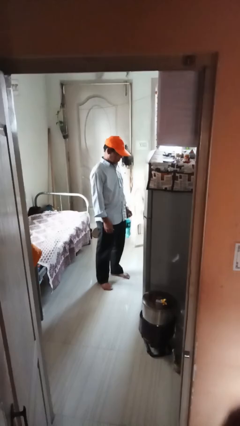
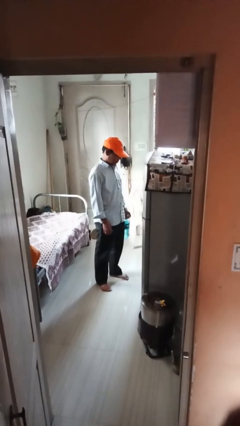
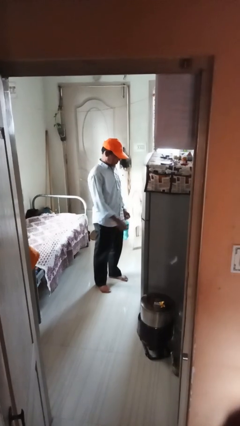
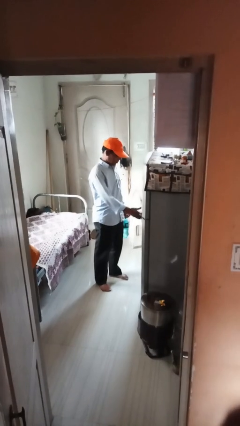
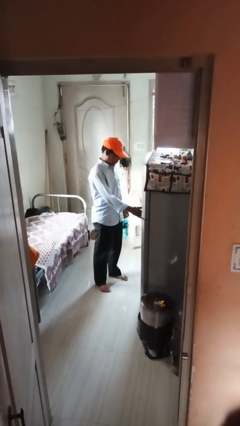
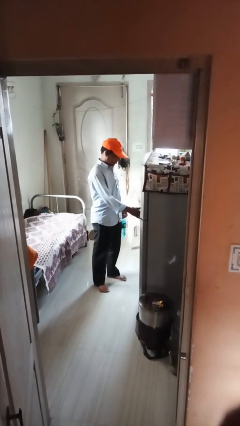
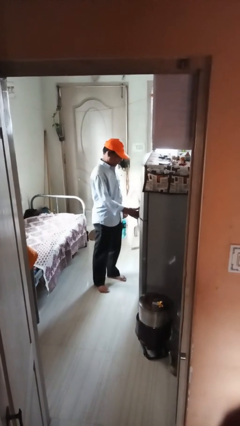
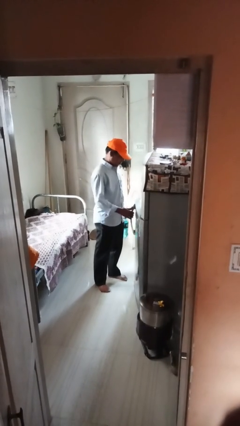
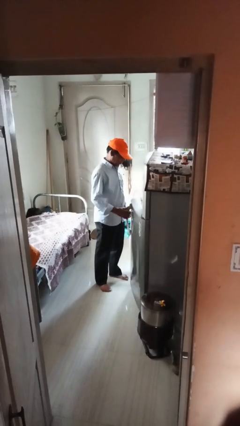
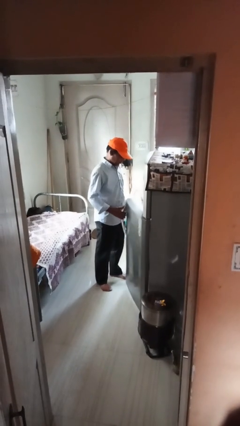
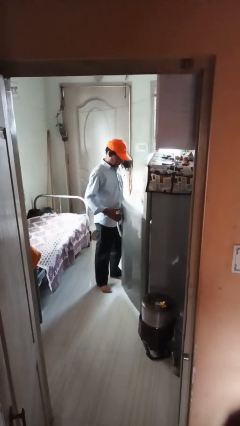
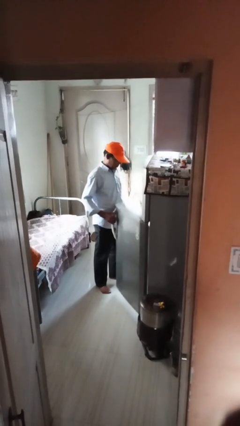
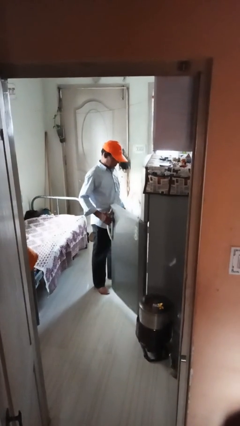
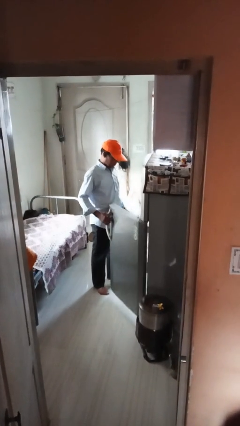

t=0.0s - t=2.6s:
person opens refrigerator

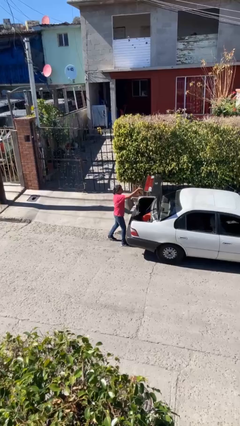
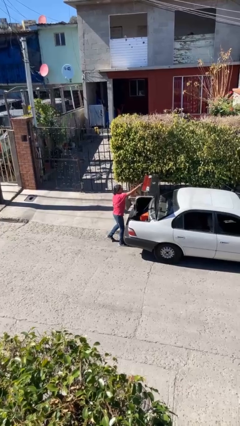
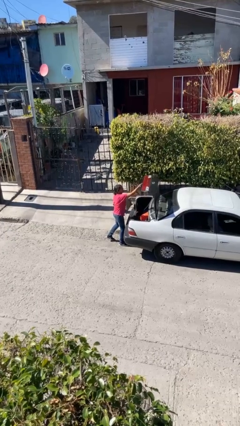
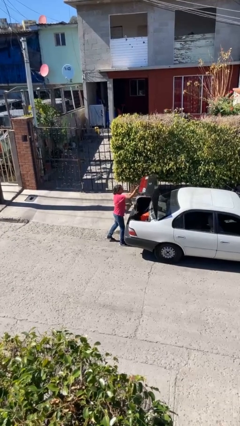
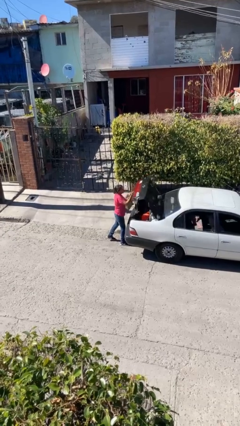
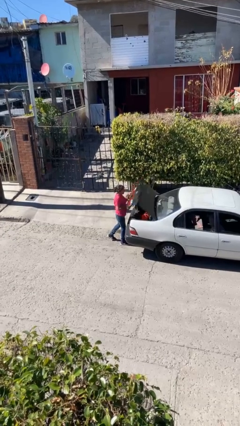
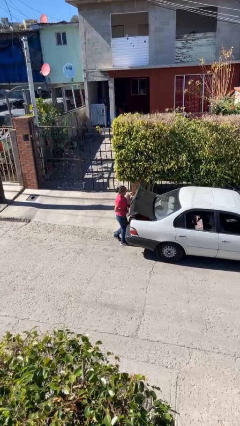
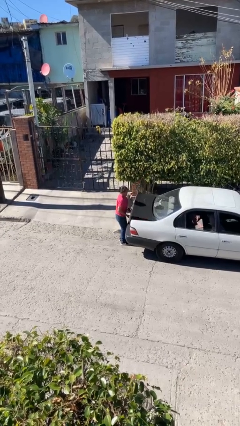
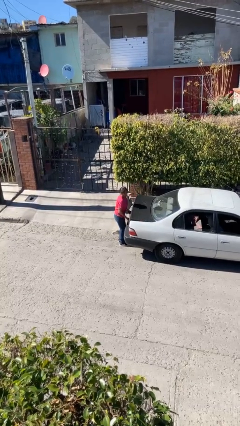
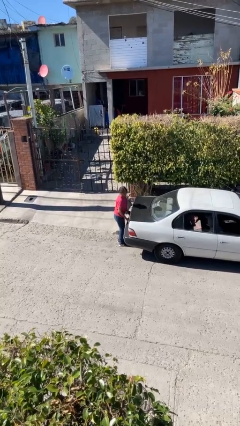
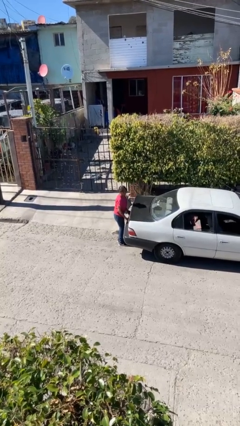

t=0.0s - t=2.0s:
person closes car trunk

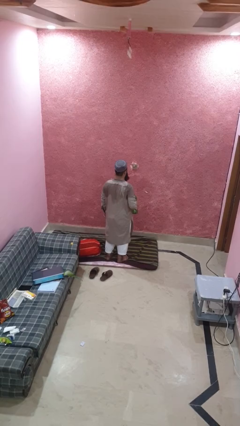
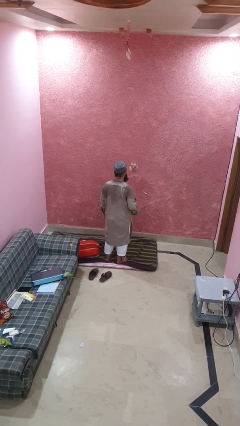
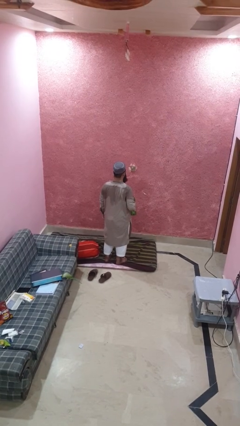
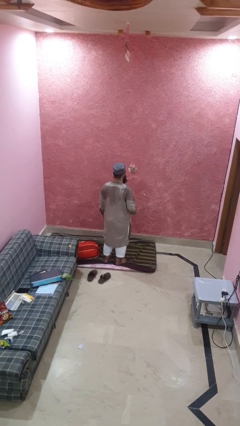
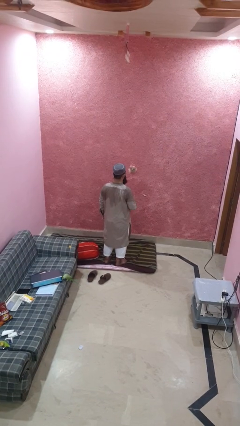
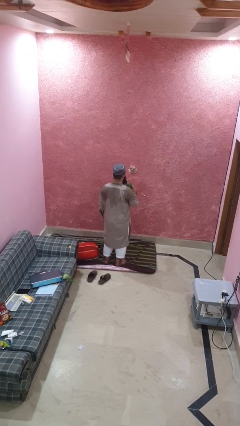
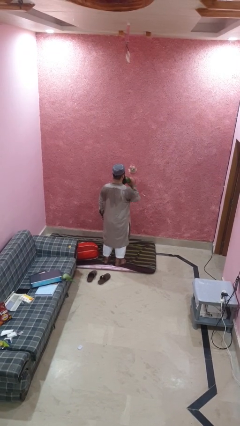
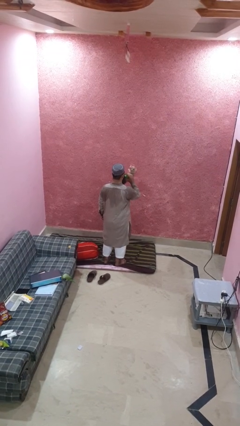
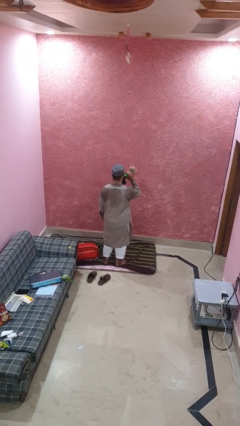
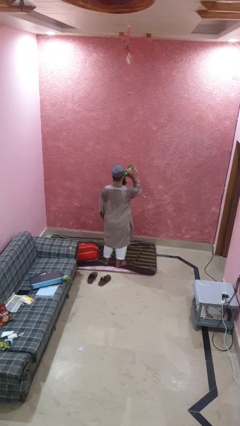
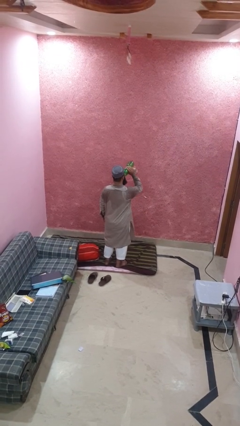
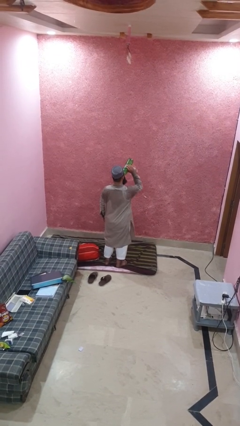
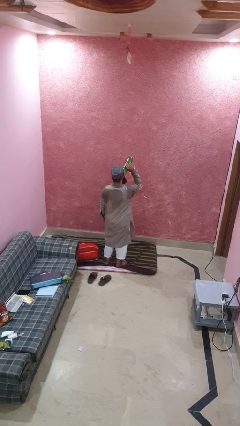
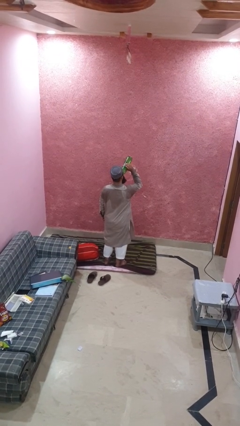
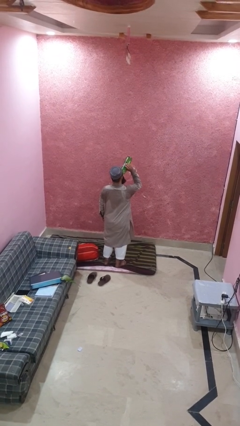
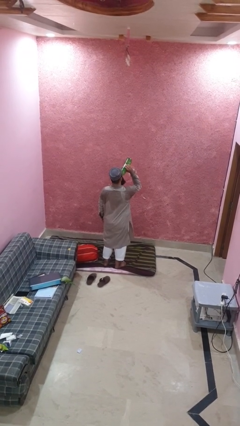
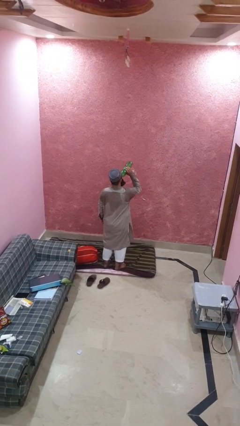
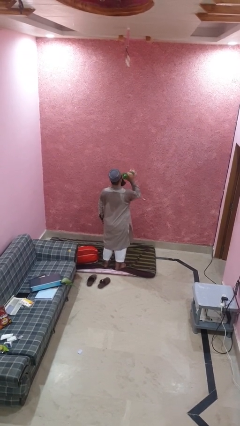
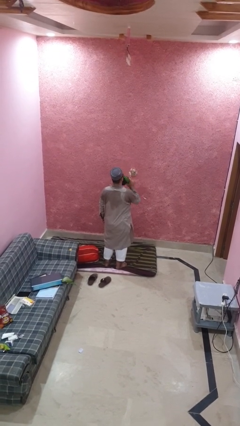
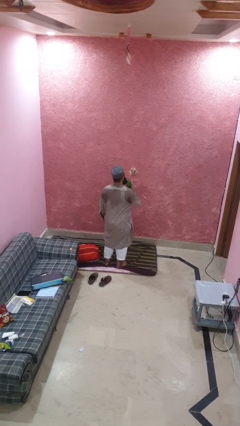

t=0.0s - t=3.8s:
person drinks from bottle

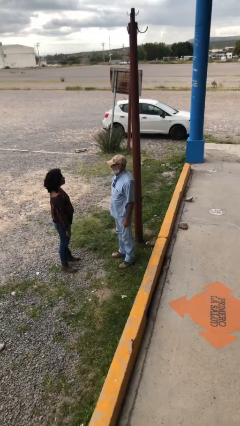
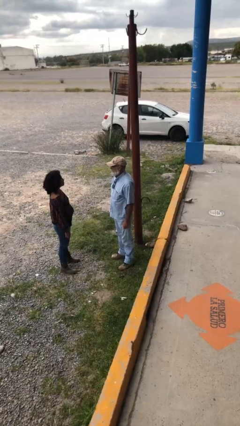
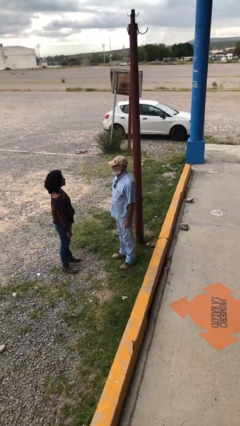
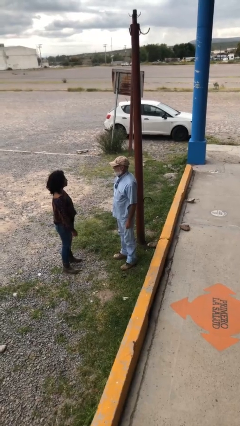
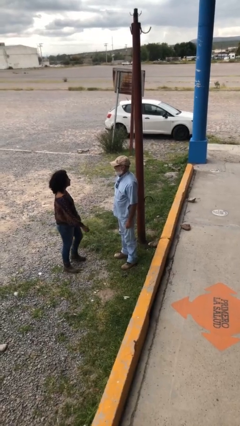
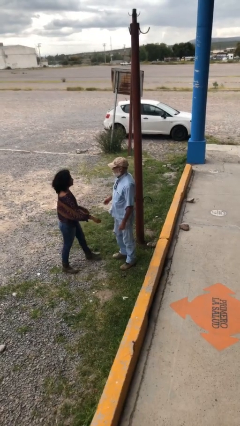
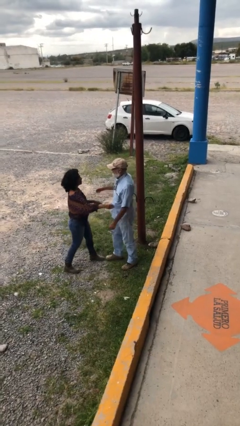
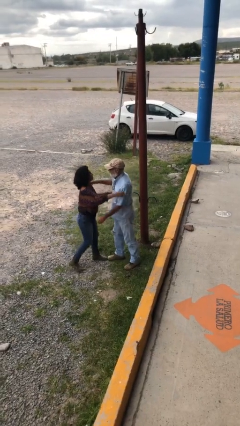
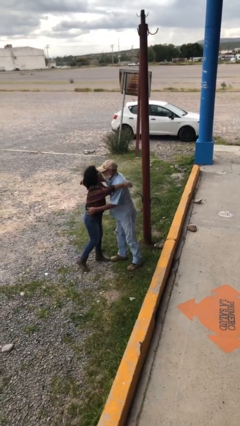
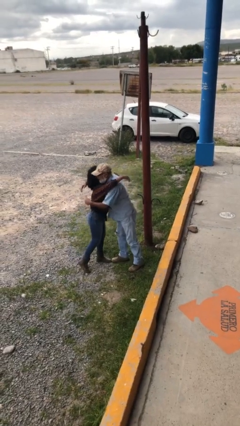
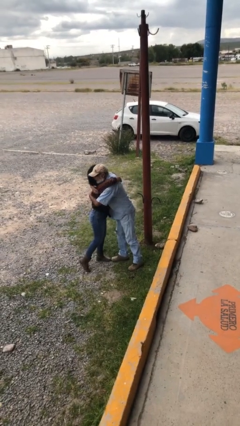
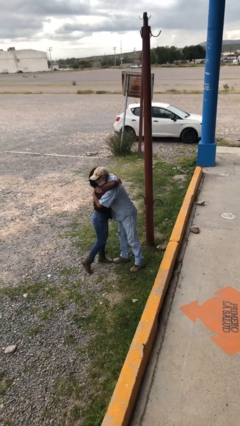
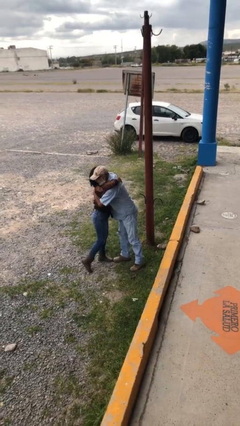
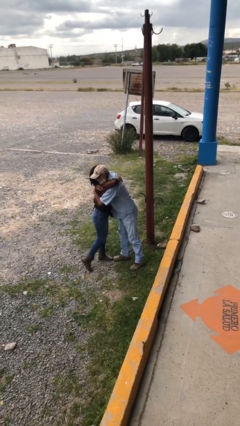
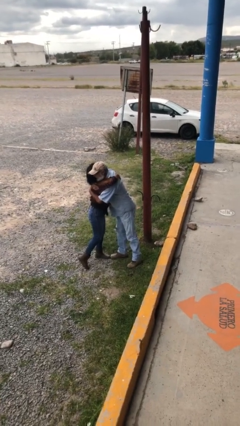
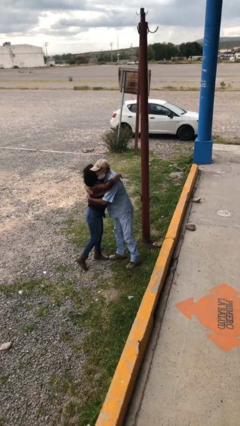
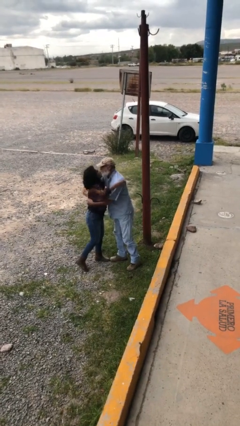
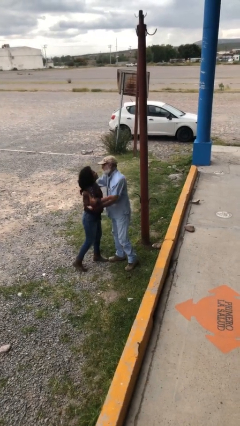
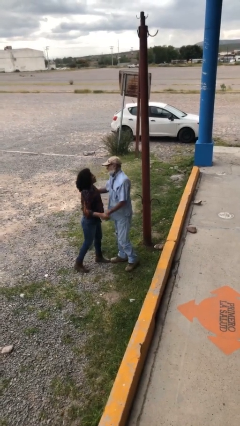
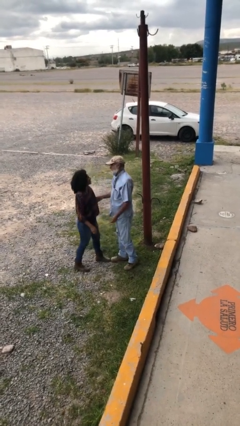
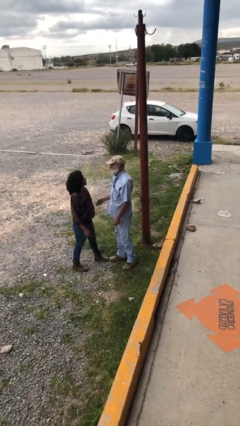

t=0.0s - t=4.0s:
person embraces person

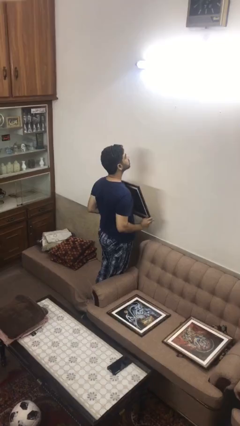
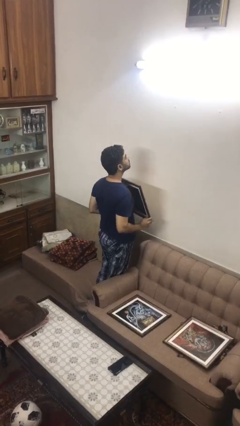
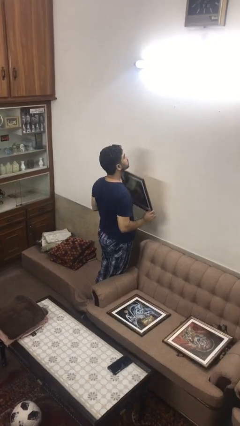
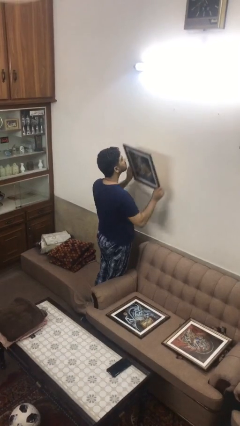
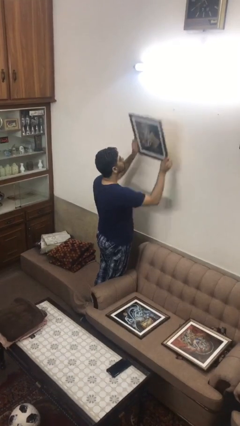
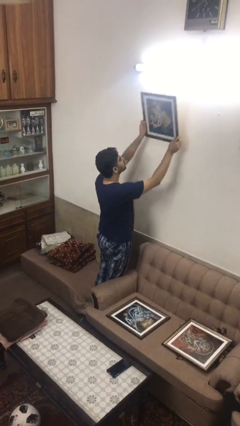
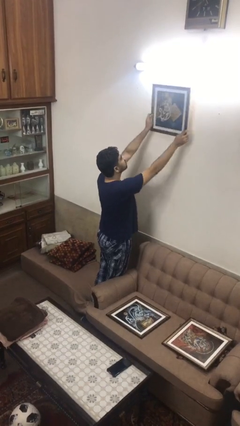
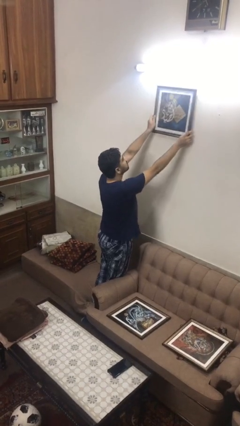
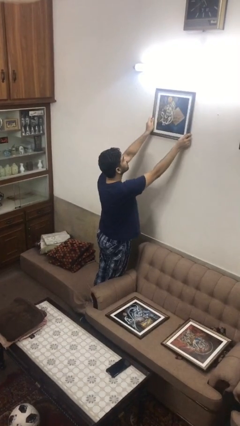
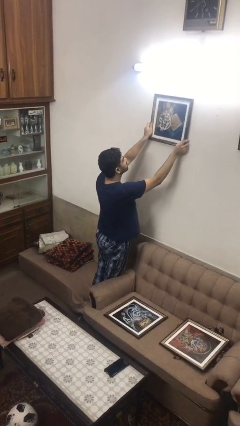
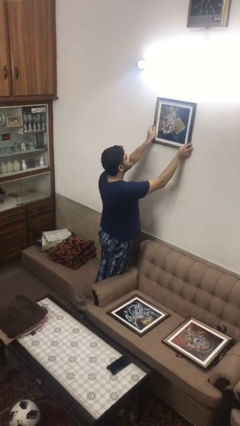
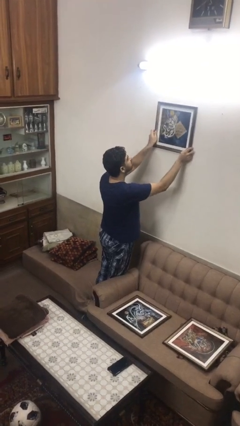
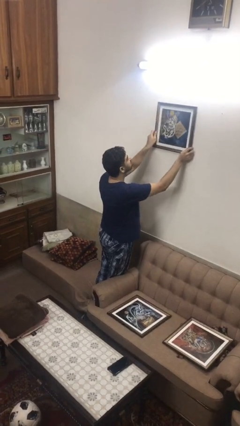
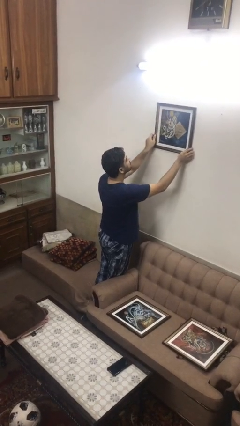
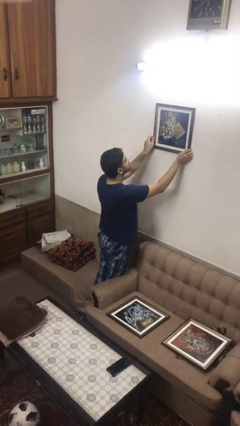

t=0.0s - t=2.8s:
person puts up picture frame

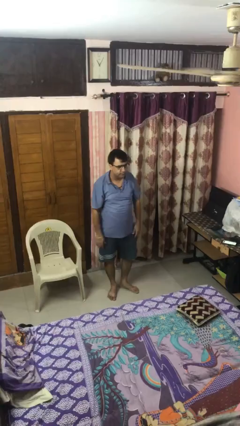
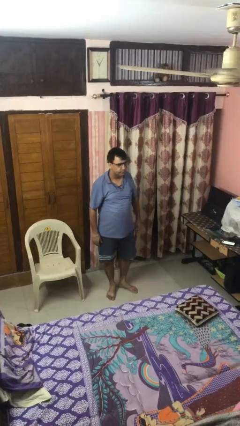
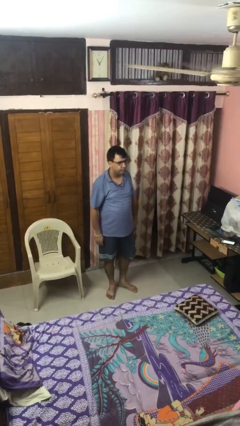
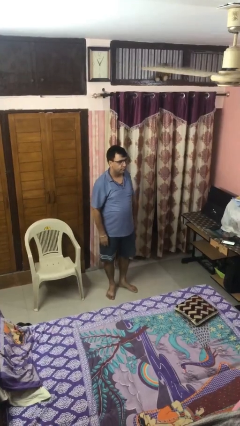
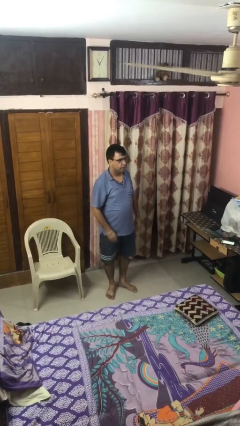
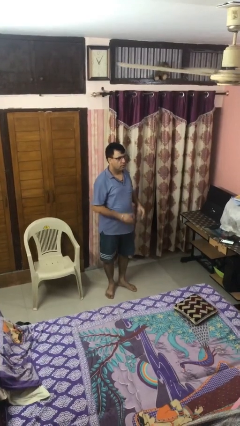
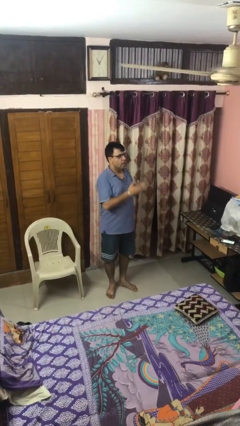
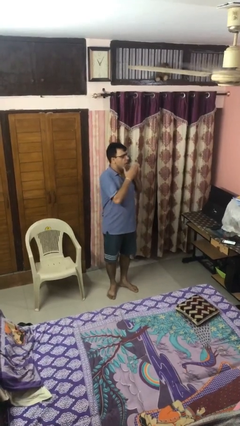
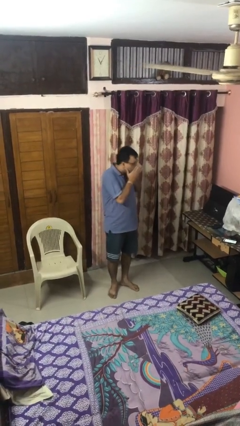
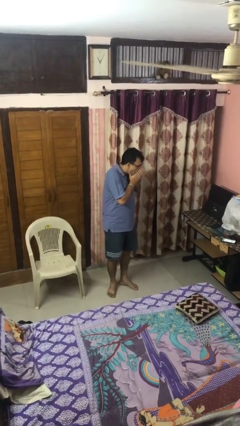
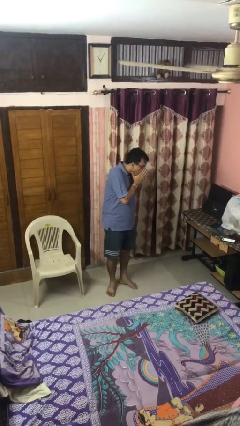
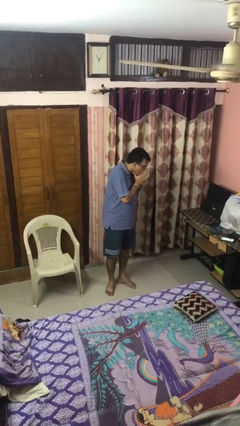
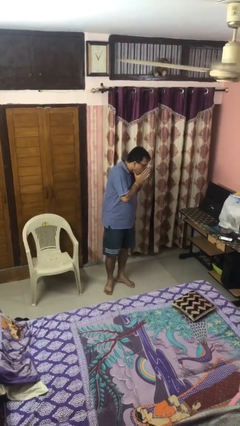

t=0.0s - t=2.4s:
person sneezes into hand
